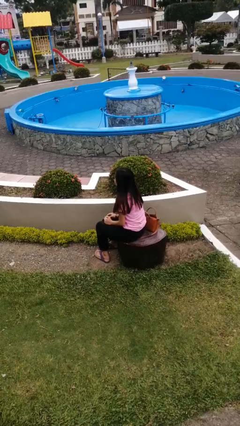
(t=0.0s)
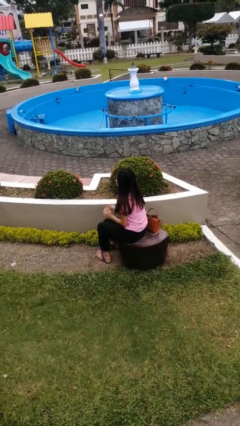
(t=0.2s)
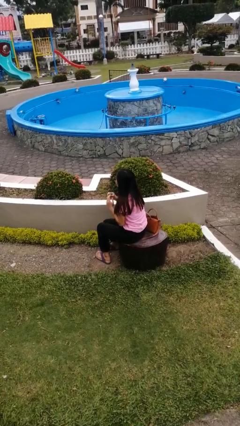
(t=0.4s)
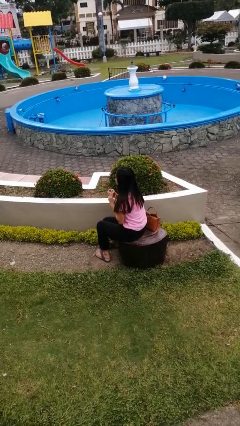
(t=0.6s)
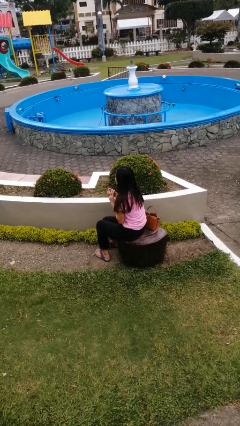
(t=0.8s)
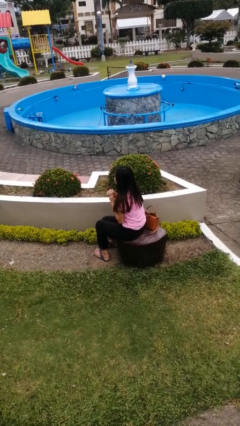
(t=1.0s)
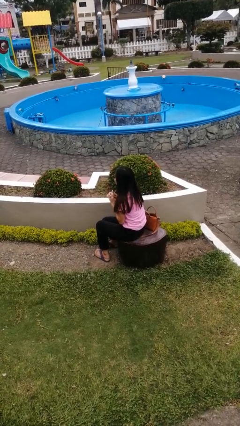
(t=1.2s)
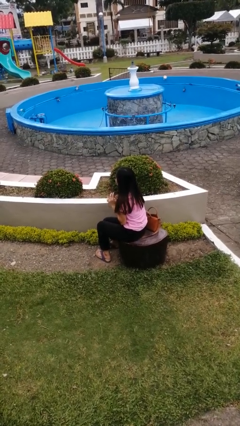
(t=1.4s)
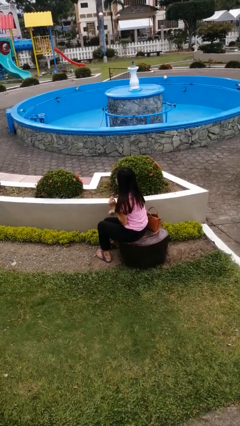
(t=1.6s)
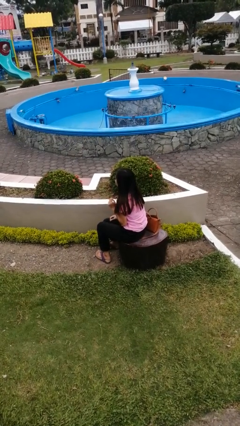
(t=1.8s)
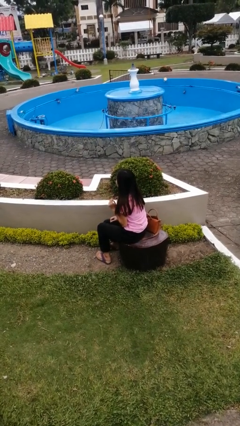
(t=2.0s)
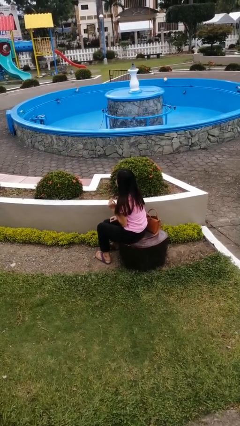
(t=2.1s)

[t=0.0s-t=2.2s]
person puts on ring

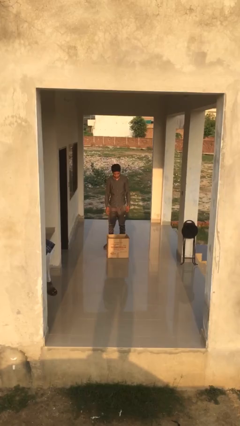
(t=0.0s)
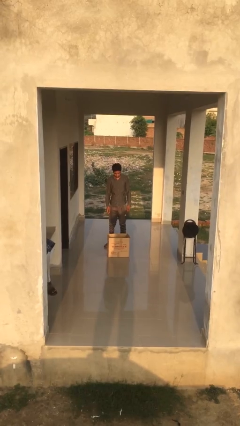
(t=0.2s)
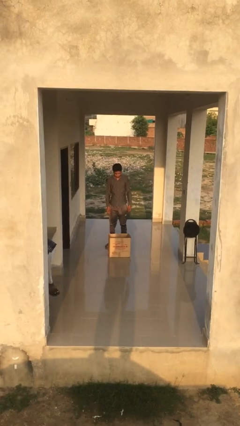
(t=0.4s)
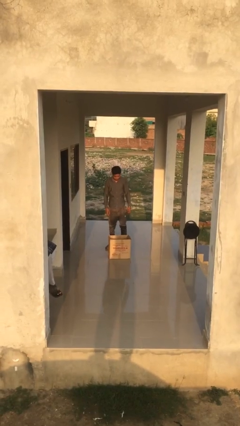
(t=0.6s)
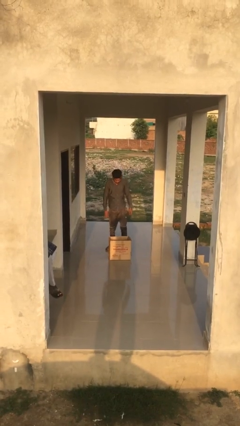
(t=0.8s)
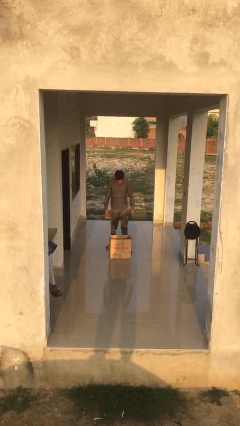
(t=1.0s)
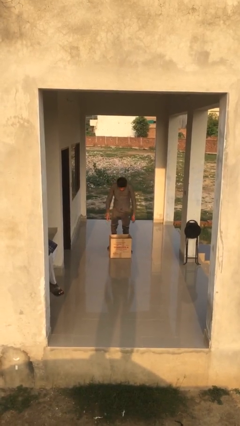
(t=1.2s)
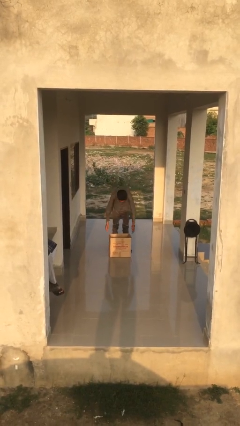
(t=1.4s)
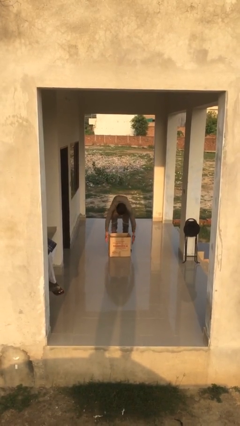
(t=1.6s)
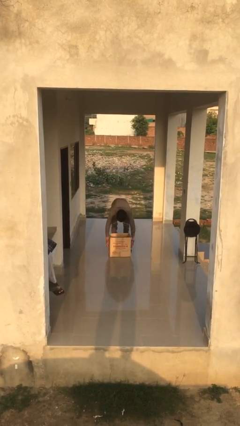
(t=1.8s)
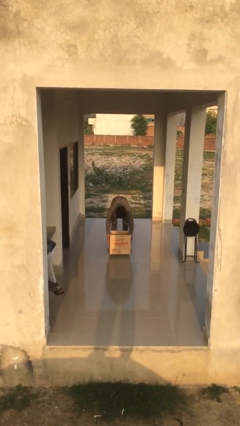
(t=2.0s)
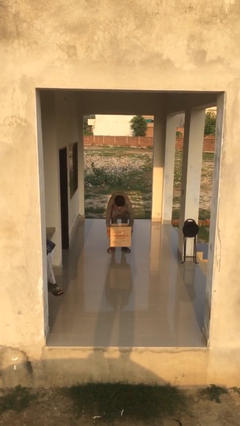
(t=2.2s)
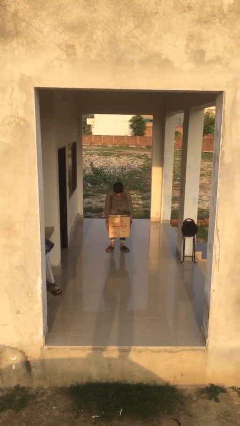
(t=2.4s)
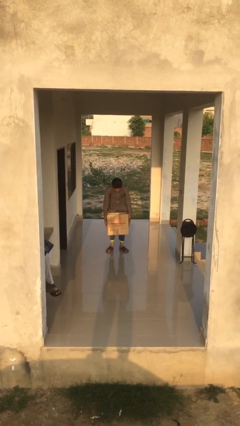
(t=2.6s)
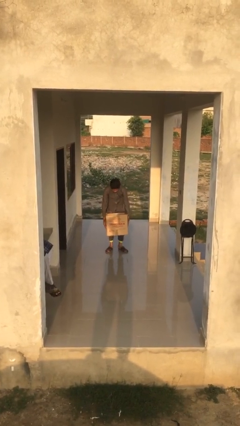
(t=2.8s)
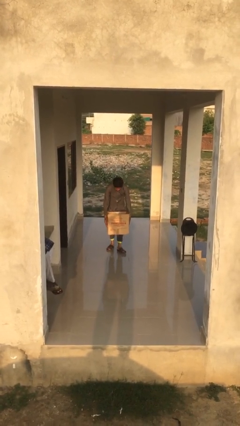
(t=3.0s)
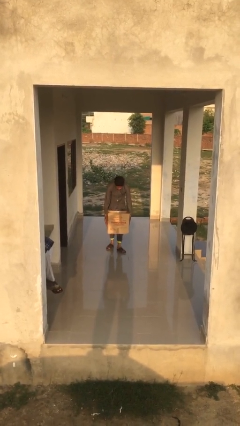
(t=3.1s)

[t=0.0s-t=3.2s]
person picks up object from floor

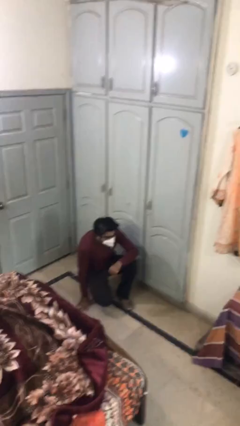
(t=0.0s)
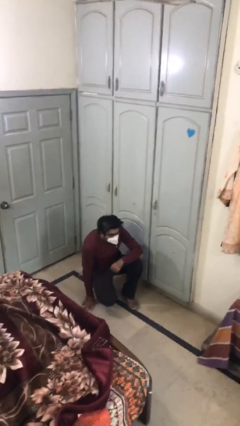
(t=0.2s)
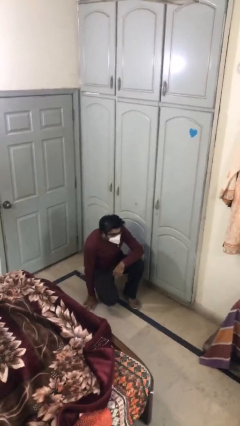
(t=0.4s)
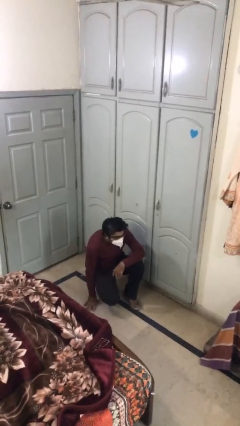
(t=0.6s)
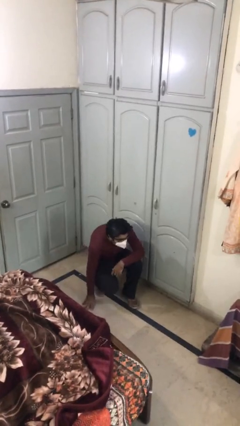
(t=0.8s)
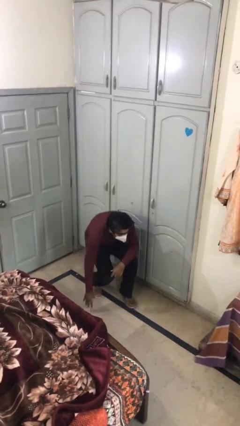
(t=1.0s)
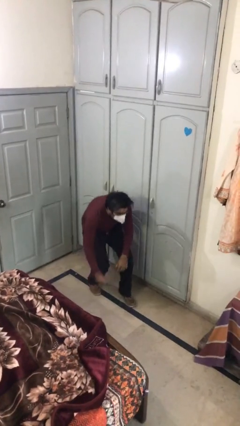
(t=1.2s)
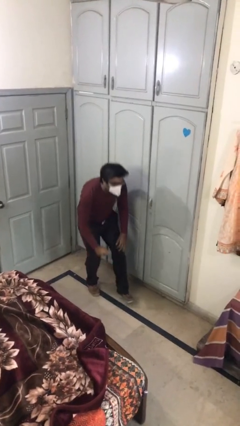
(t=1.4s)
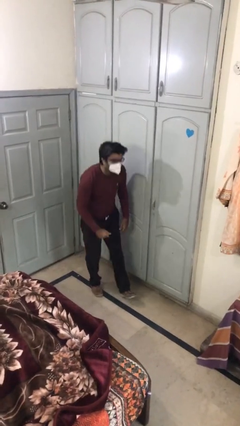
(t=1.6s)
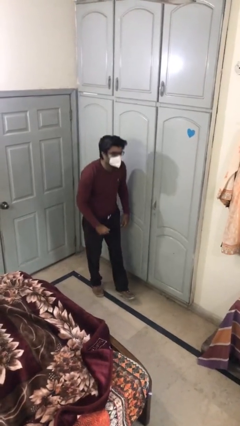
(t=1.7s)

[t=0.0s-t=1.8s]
person stands up

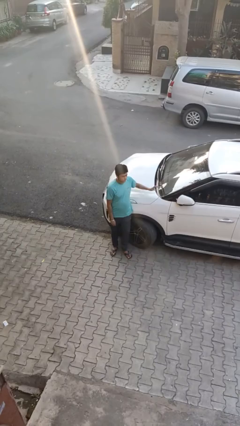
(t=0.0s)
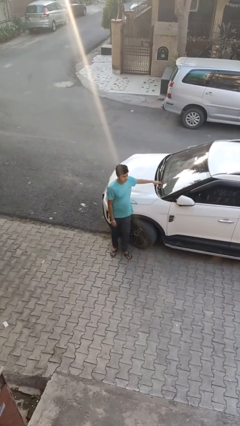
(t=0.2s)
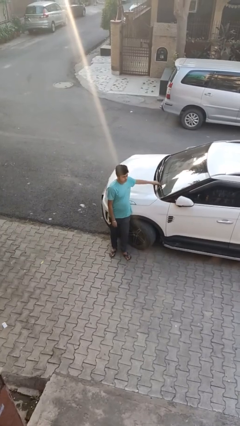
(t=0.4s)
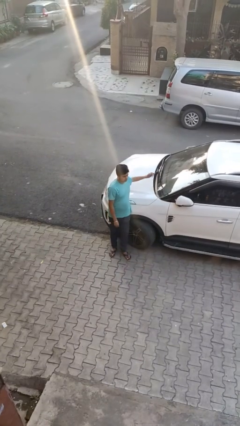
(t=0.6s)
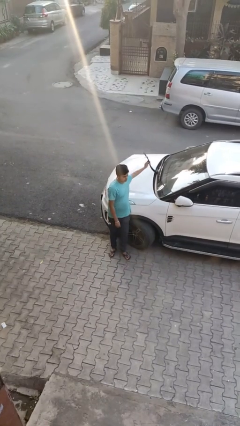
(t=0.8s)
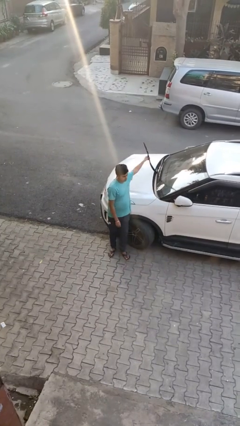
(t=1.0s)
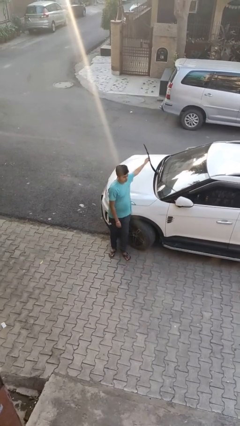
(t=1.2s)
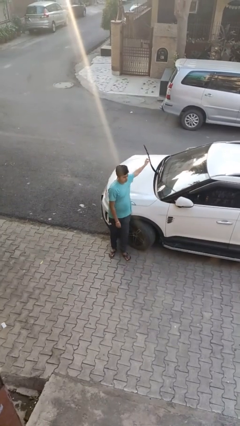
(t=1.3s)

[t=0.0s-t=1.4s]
person flips up car wipers

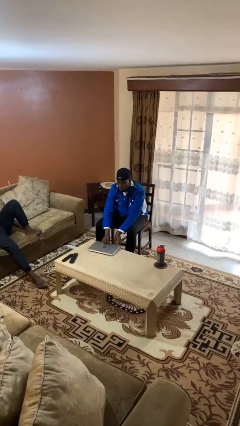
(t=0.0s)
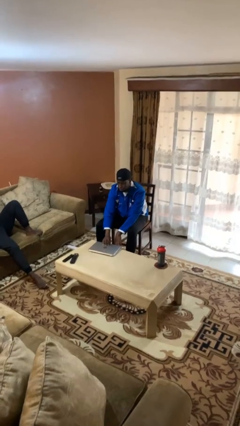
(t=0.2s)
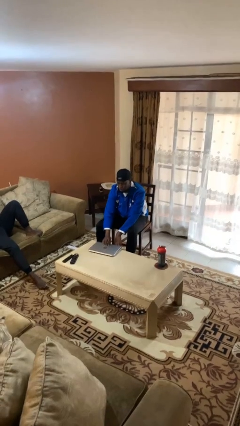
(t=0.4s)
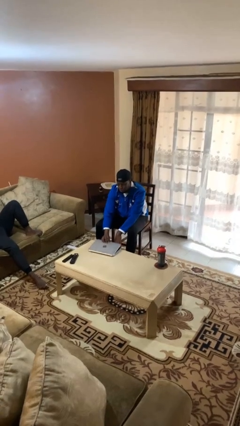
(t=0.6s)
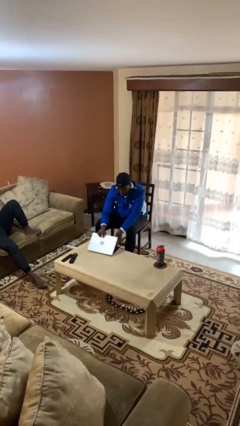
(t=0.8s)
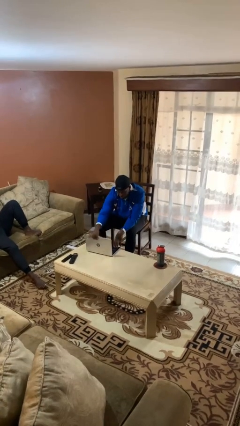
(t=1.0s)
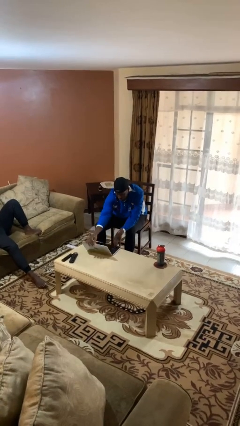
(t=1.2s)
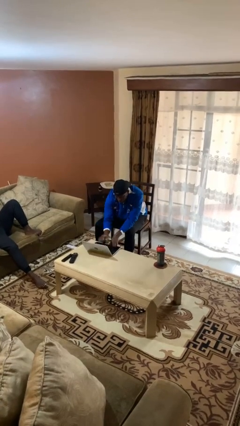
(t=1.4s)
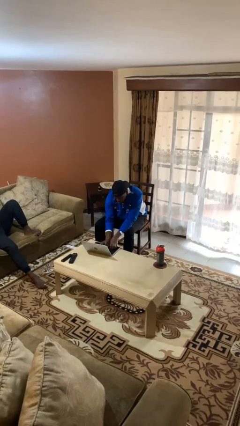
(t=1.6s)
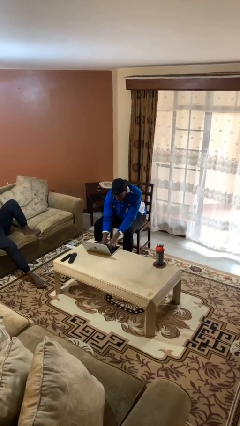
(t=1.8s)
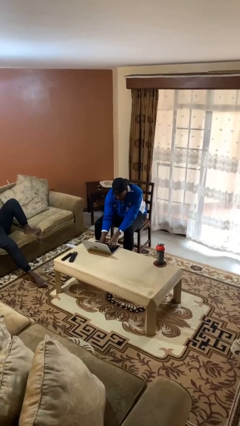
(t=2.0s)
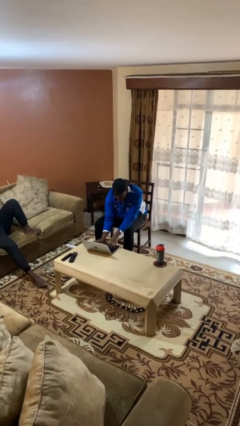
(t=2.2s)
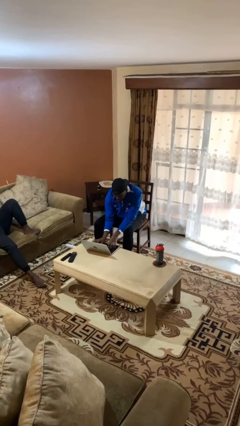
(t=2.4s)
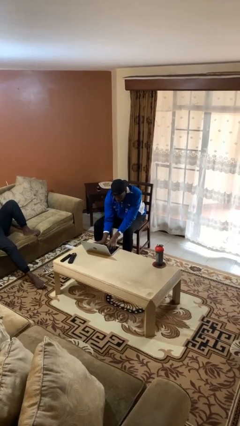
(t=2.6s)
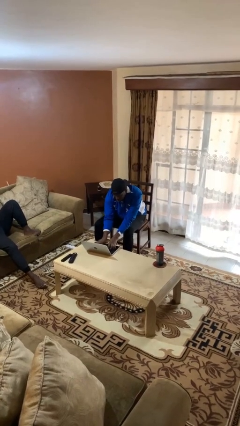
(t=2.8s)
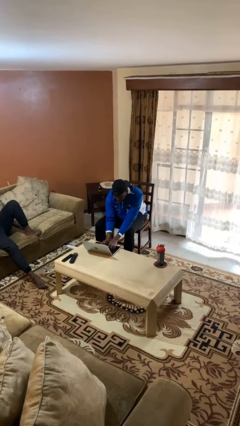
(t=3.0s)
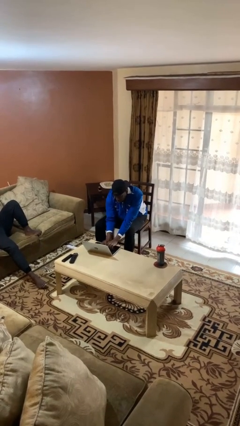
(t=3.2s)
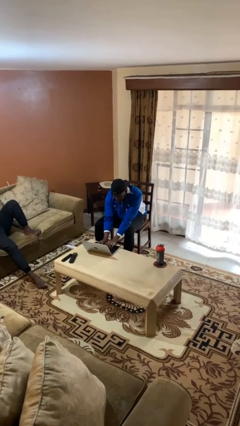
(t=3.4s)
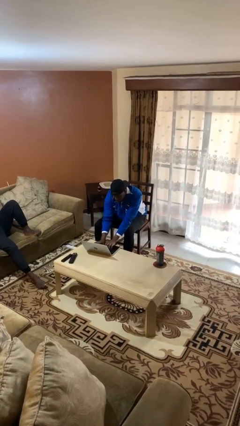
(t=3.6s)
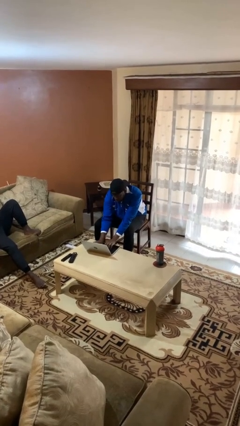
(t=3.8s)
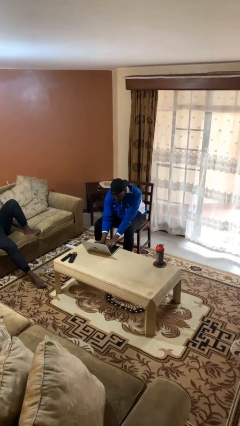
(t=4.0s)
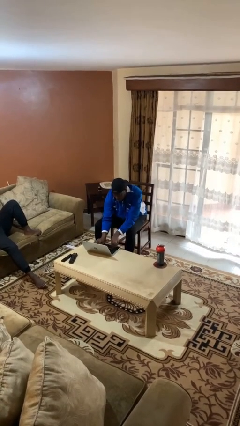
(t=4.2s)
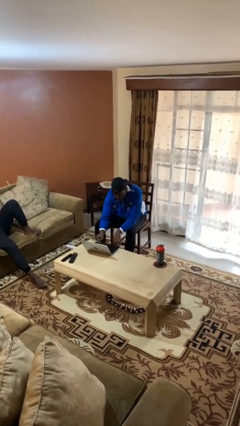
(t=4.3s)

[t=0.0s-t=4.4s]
person interacts with laptop

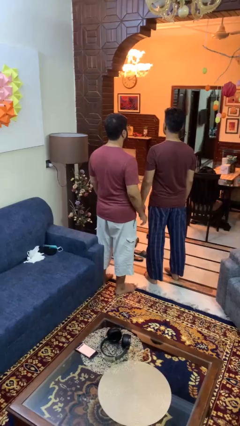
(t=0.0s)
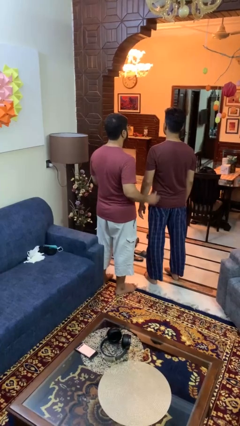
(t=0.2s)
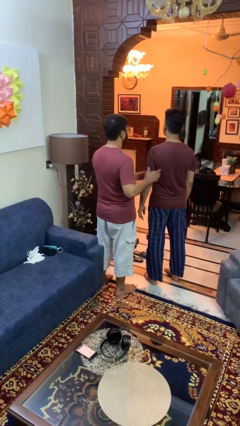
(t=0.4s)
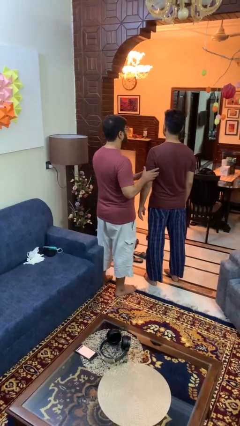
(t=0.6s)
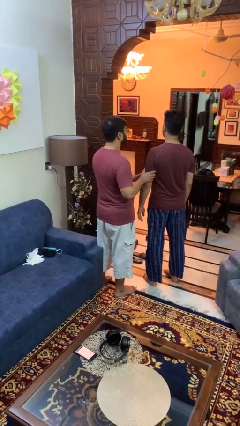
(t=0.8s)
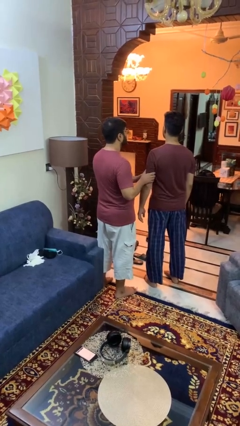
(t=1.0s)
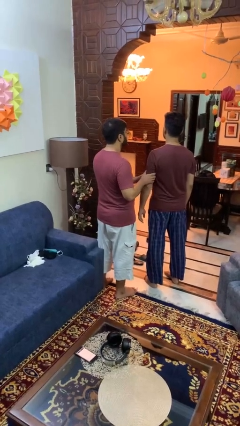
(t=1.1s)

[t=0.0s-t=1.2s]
person grabs person by bicep

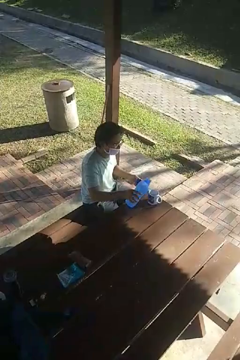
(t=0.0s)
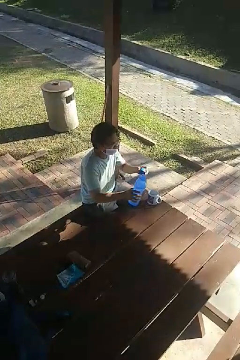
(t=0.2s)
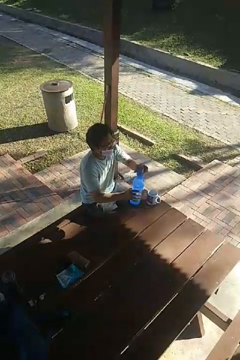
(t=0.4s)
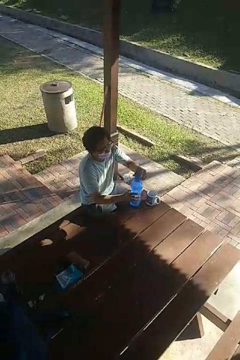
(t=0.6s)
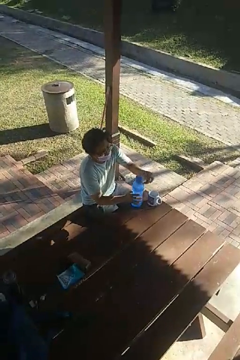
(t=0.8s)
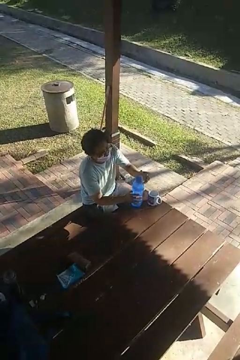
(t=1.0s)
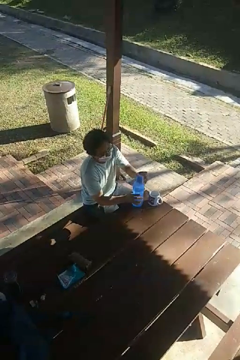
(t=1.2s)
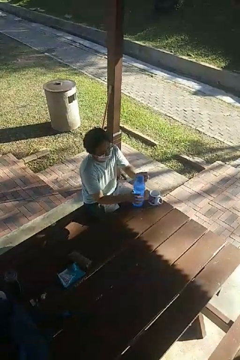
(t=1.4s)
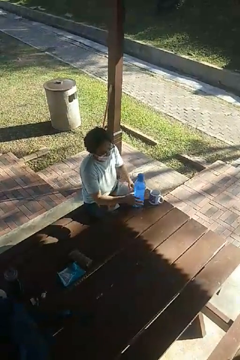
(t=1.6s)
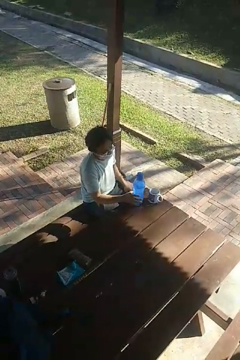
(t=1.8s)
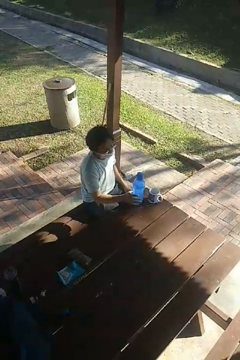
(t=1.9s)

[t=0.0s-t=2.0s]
person screws lid to bottle

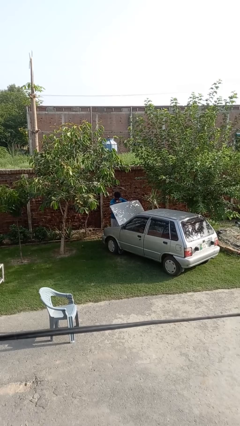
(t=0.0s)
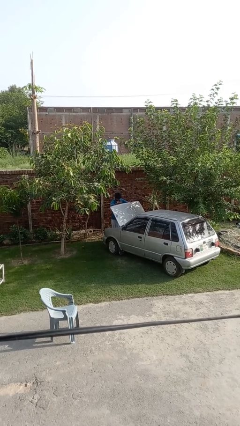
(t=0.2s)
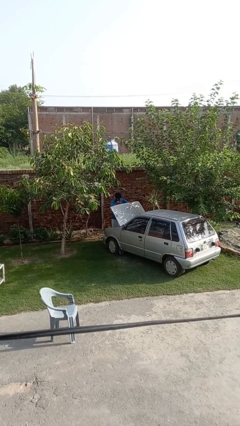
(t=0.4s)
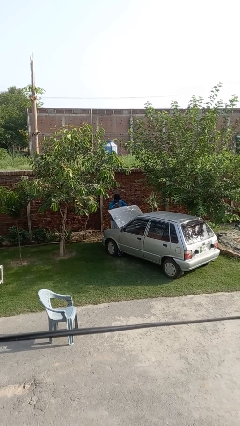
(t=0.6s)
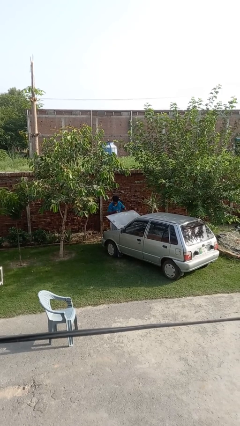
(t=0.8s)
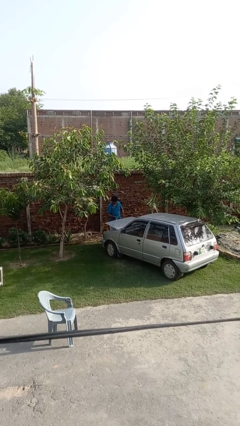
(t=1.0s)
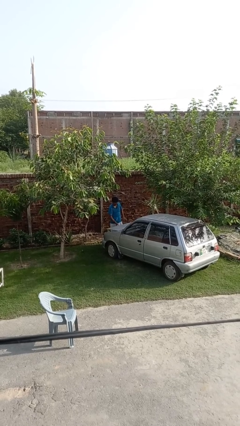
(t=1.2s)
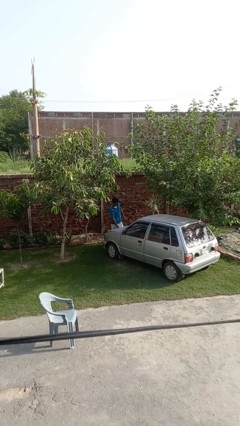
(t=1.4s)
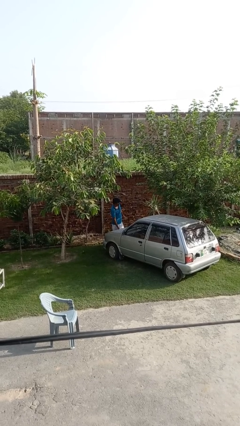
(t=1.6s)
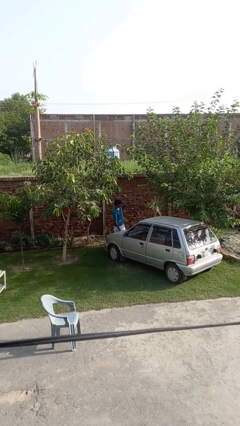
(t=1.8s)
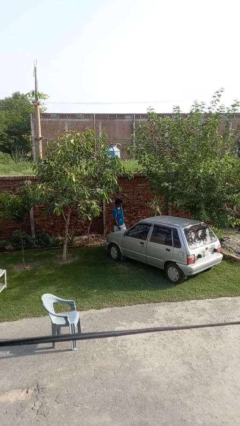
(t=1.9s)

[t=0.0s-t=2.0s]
person closes car hood
